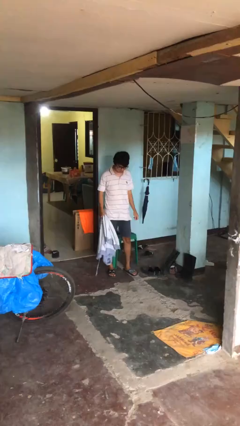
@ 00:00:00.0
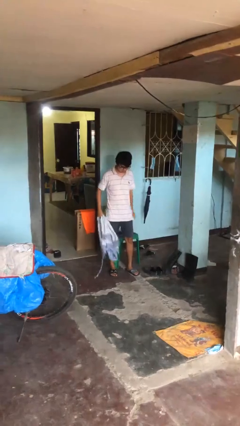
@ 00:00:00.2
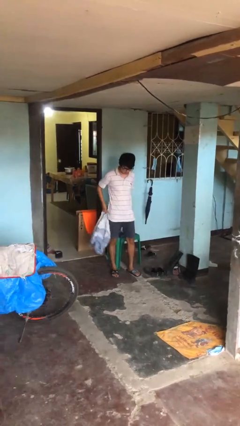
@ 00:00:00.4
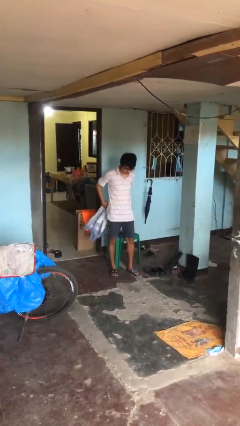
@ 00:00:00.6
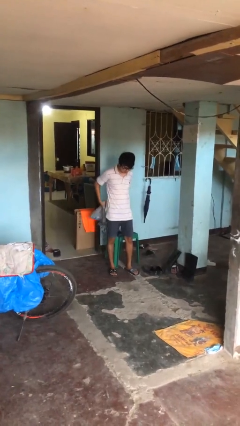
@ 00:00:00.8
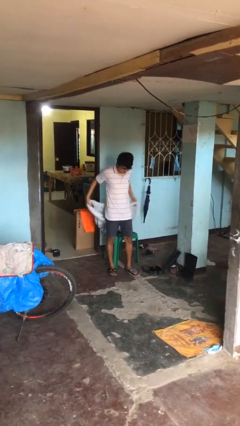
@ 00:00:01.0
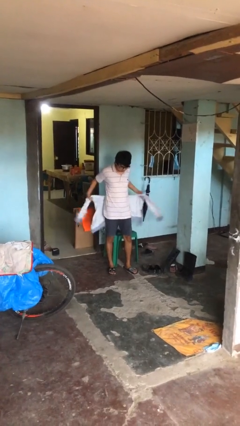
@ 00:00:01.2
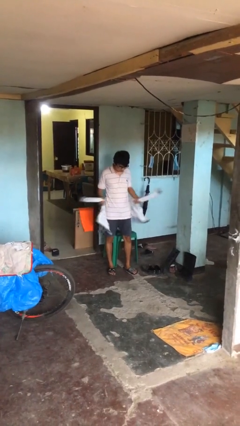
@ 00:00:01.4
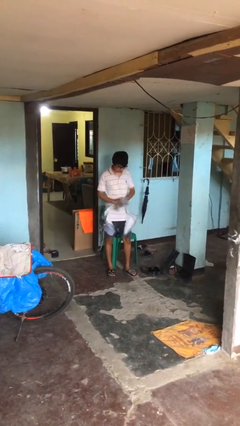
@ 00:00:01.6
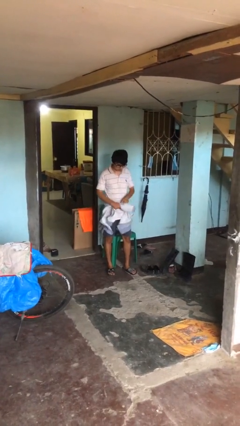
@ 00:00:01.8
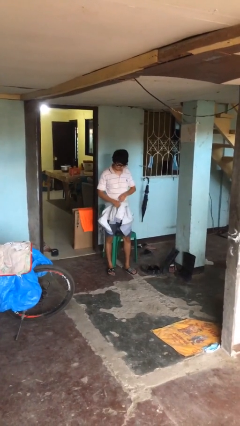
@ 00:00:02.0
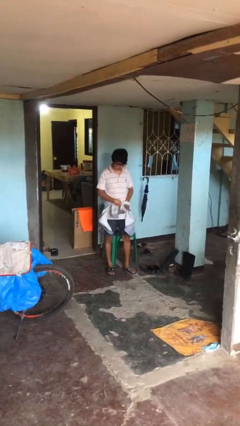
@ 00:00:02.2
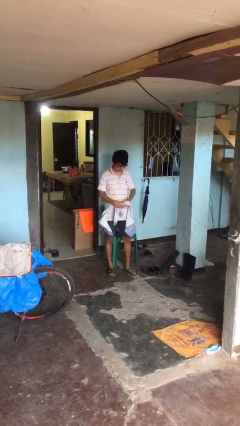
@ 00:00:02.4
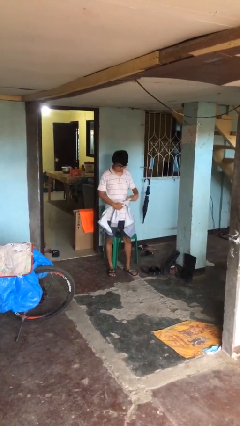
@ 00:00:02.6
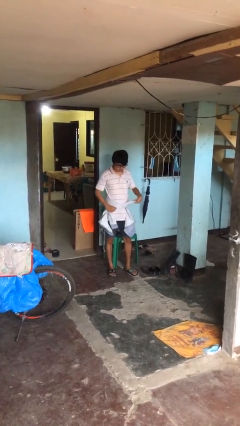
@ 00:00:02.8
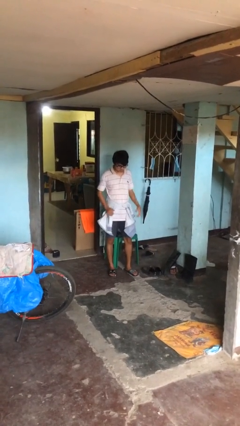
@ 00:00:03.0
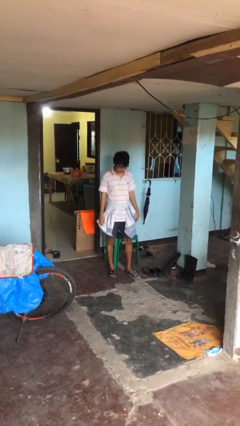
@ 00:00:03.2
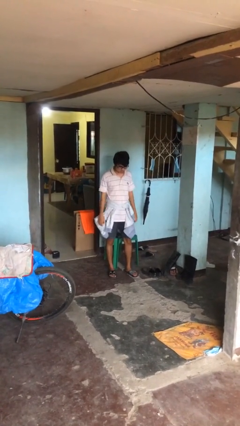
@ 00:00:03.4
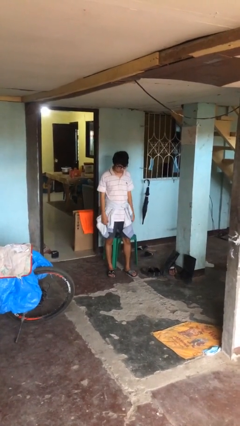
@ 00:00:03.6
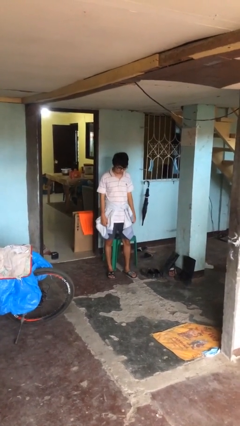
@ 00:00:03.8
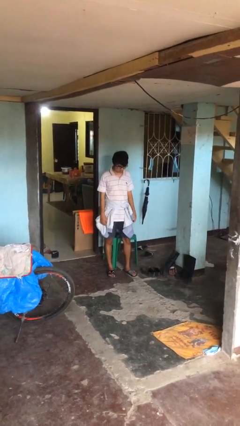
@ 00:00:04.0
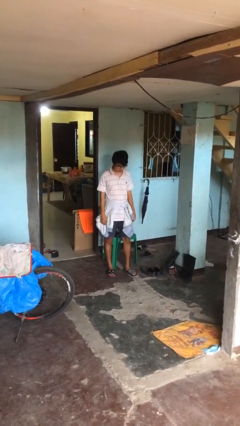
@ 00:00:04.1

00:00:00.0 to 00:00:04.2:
person ties jacket around waist

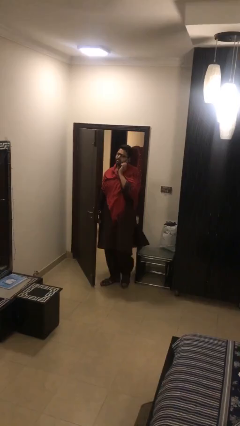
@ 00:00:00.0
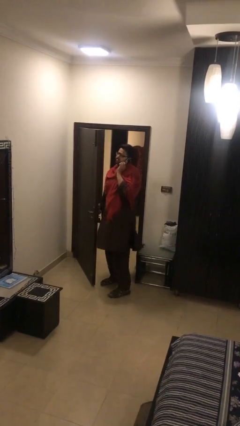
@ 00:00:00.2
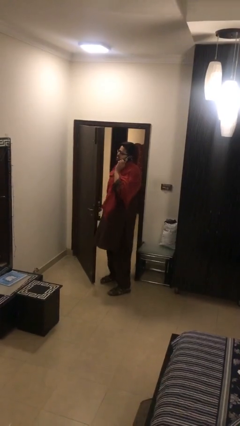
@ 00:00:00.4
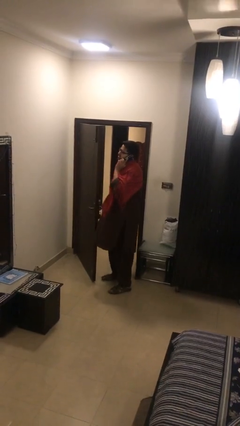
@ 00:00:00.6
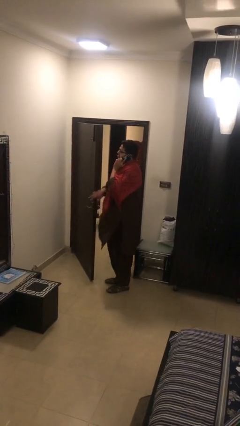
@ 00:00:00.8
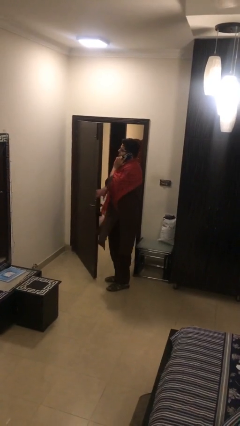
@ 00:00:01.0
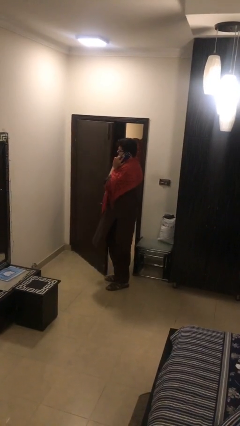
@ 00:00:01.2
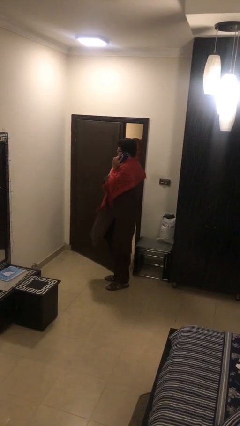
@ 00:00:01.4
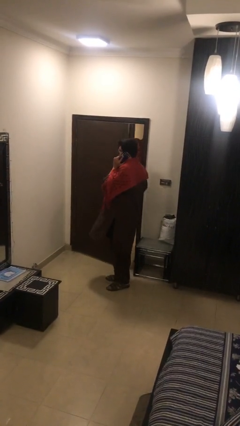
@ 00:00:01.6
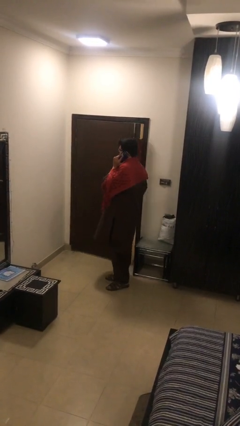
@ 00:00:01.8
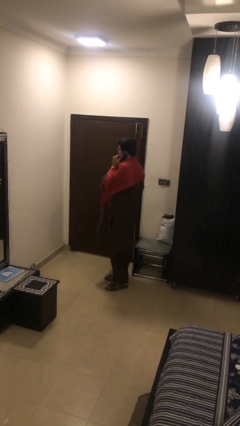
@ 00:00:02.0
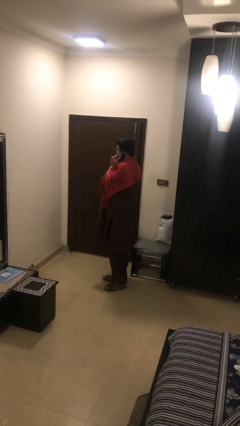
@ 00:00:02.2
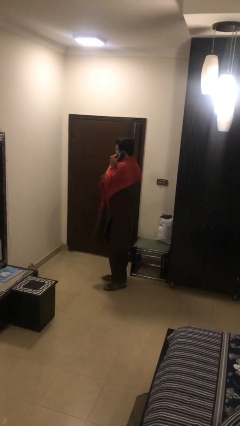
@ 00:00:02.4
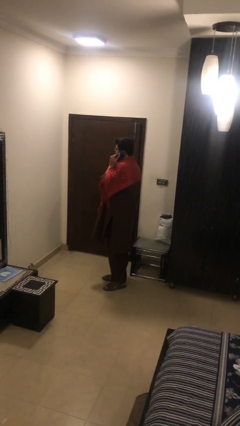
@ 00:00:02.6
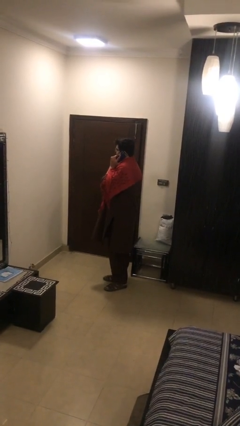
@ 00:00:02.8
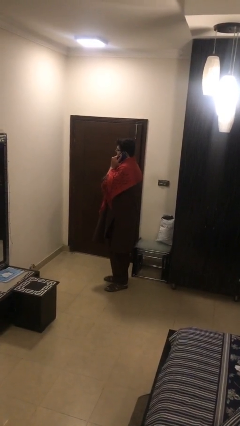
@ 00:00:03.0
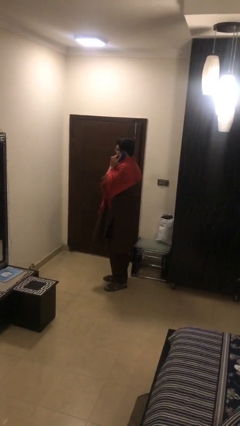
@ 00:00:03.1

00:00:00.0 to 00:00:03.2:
person closes facility door

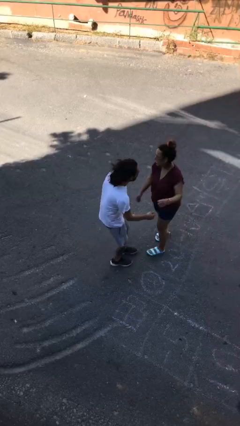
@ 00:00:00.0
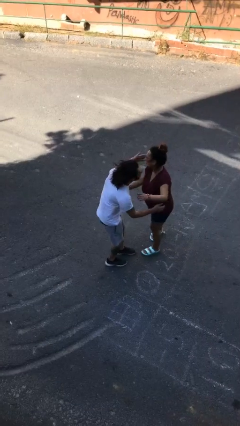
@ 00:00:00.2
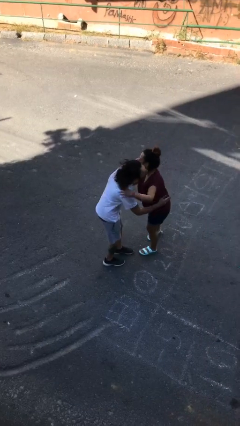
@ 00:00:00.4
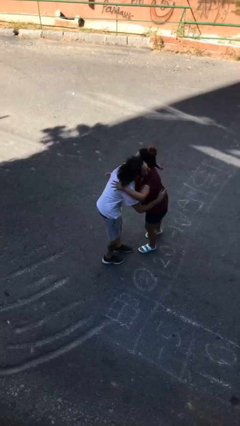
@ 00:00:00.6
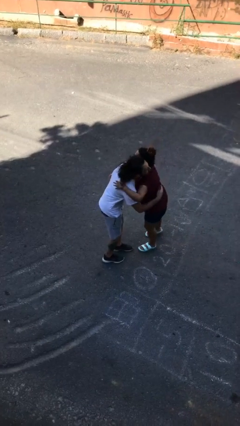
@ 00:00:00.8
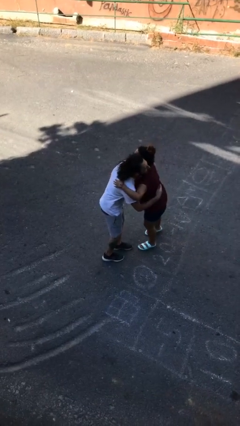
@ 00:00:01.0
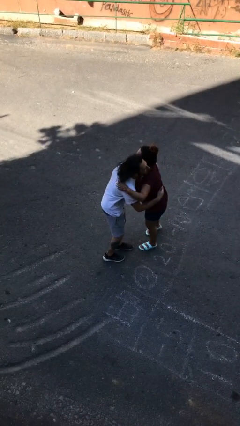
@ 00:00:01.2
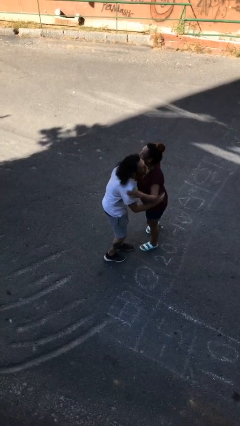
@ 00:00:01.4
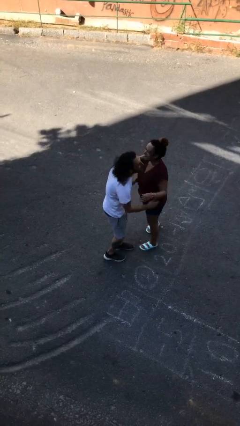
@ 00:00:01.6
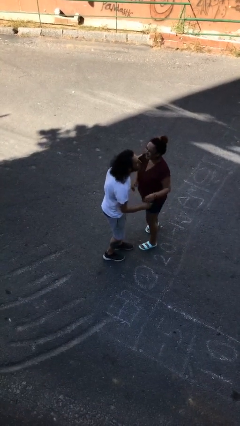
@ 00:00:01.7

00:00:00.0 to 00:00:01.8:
person embraces person

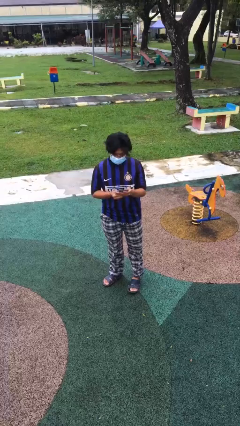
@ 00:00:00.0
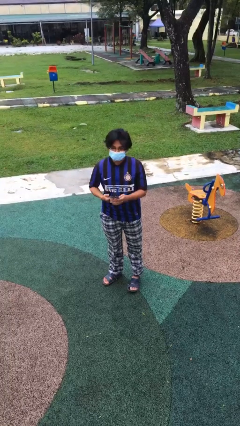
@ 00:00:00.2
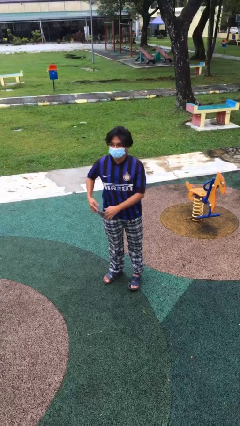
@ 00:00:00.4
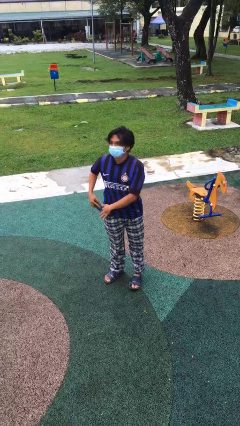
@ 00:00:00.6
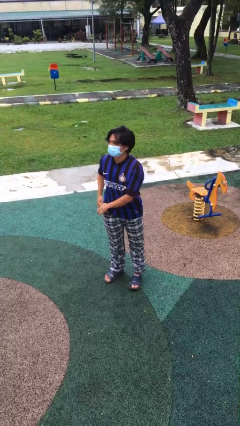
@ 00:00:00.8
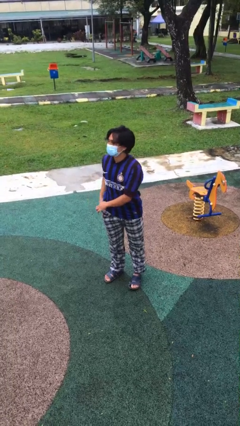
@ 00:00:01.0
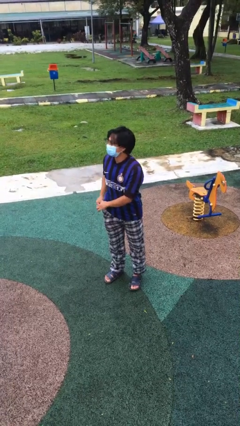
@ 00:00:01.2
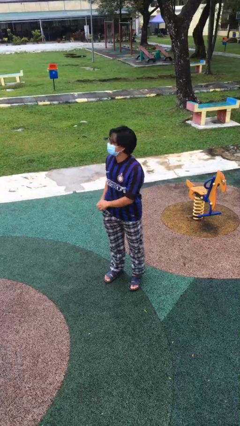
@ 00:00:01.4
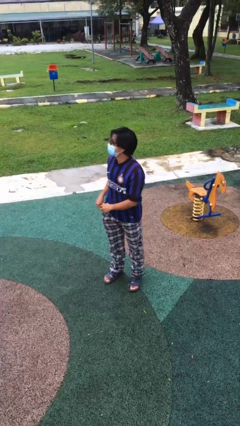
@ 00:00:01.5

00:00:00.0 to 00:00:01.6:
person puts phone into pocket

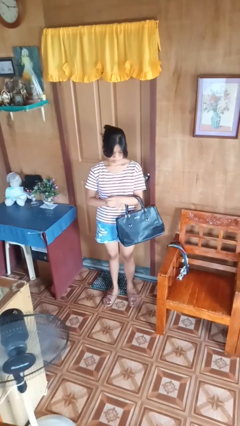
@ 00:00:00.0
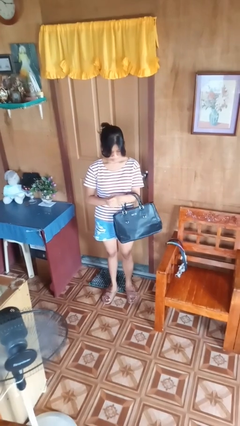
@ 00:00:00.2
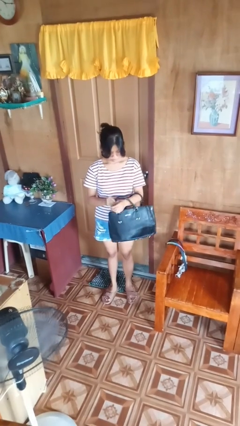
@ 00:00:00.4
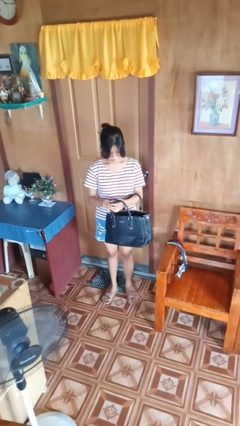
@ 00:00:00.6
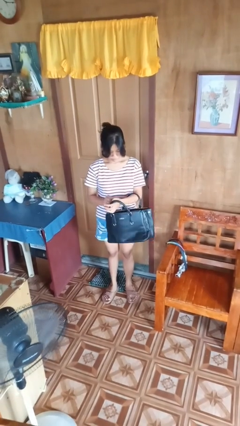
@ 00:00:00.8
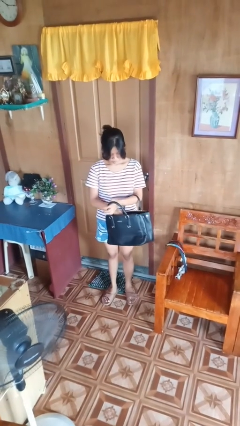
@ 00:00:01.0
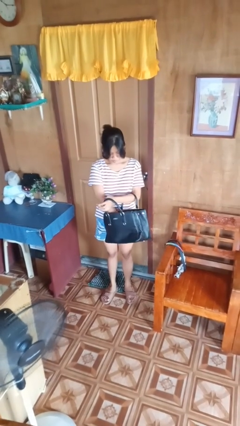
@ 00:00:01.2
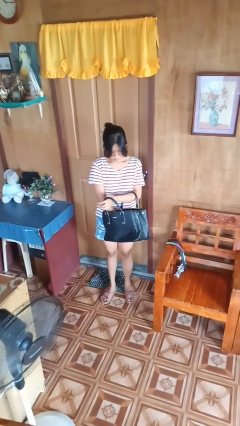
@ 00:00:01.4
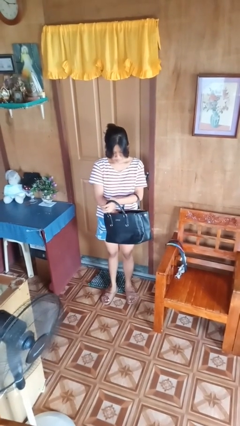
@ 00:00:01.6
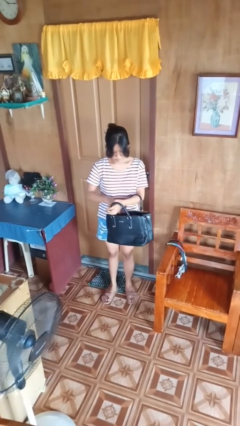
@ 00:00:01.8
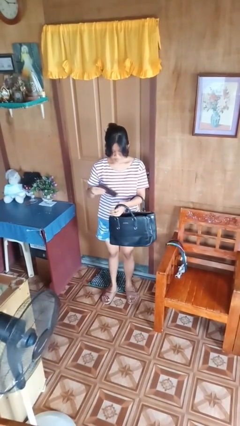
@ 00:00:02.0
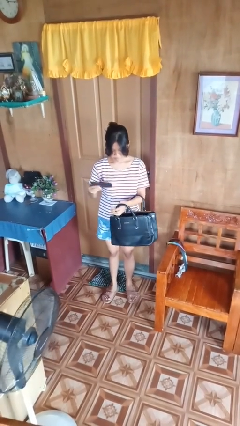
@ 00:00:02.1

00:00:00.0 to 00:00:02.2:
person searches in purse

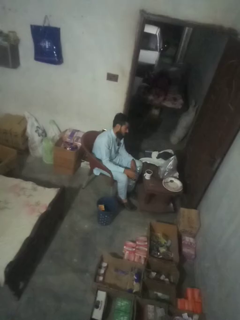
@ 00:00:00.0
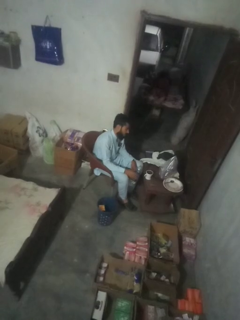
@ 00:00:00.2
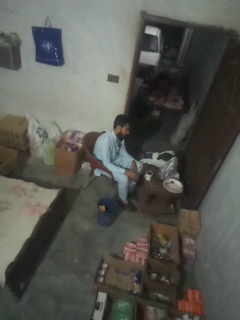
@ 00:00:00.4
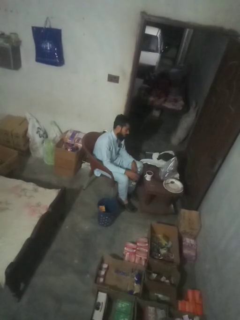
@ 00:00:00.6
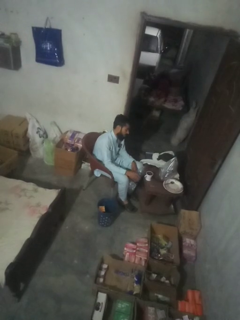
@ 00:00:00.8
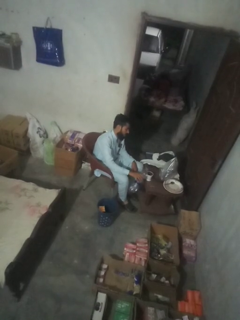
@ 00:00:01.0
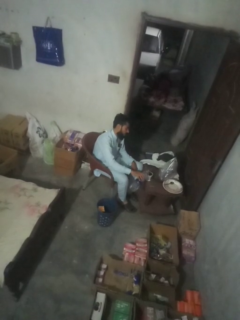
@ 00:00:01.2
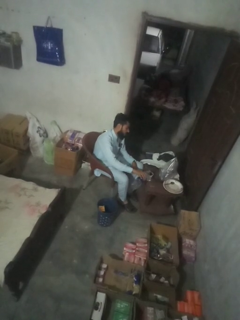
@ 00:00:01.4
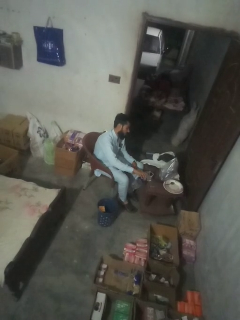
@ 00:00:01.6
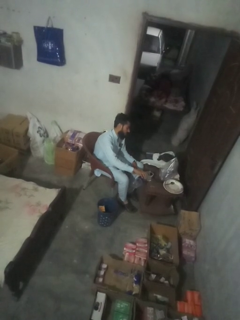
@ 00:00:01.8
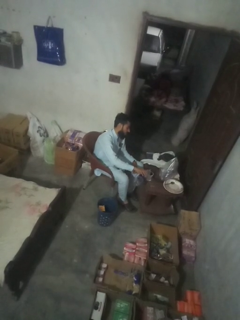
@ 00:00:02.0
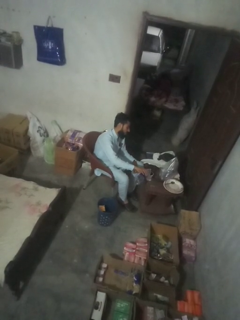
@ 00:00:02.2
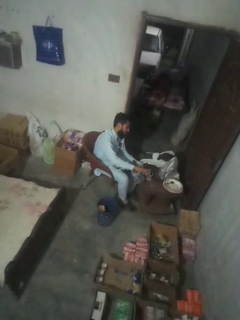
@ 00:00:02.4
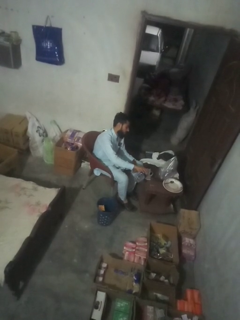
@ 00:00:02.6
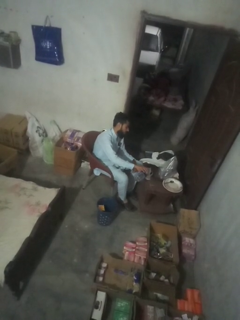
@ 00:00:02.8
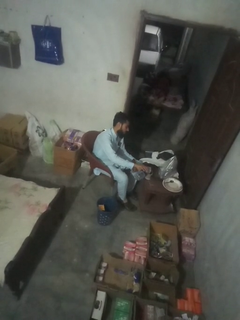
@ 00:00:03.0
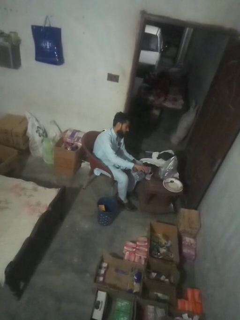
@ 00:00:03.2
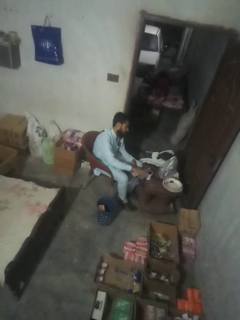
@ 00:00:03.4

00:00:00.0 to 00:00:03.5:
person pours liquid into cup

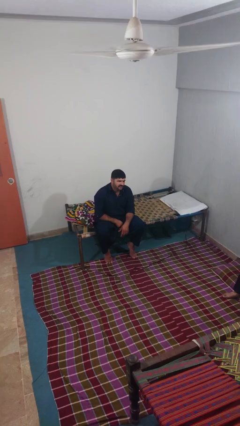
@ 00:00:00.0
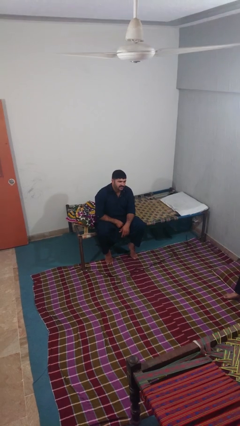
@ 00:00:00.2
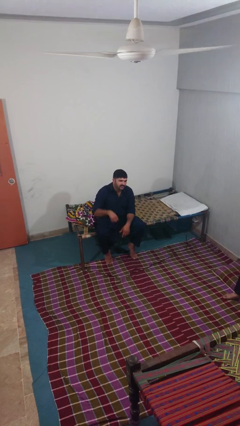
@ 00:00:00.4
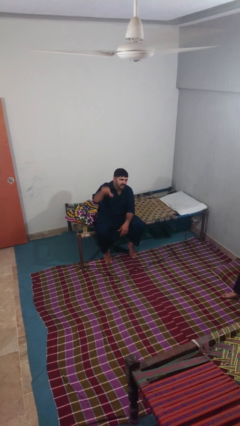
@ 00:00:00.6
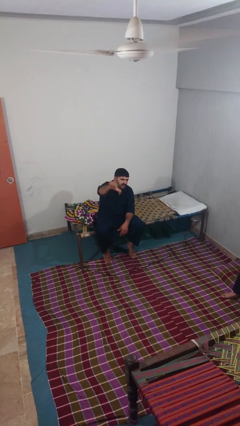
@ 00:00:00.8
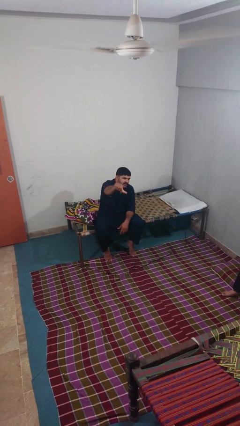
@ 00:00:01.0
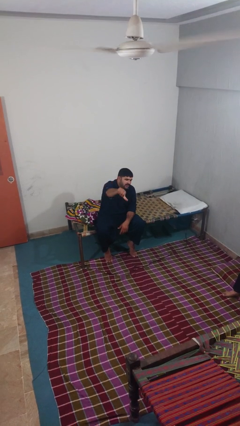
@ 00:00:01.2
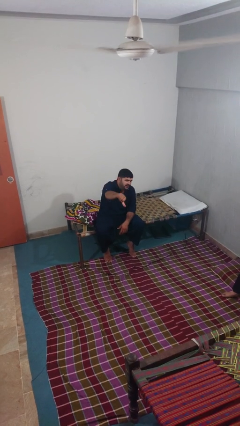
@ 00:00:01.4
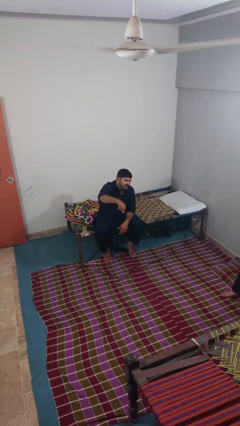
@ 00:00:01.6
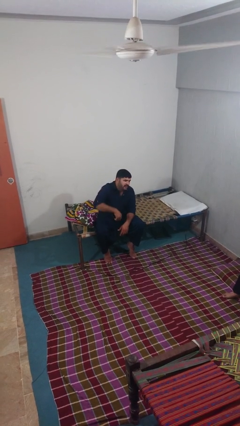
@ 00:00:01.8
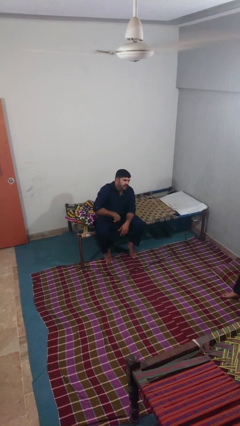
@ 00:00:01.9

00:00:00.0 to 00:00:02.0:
person gestures thumbs down
